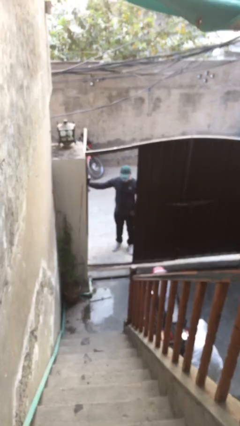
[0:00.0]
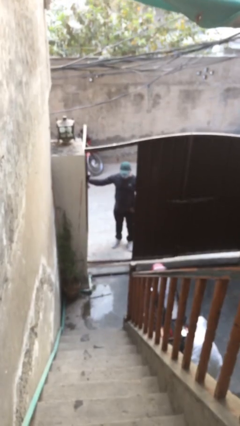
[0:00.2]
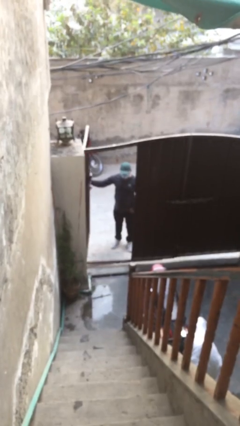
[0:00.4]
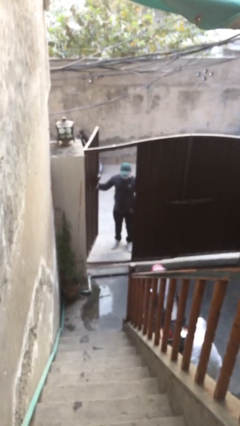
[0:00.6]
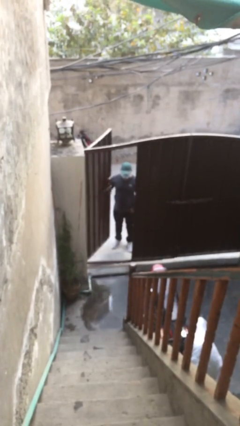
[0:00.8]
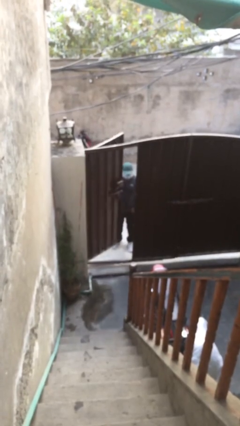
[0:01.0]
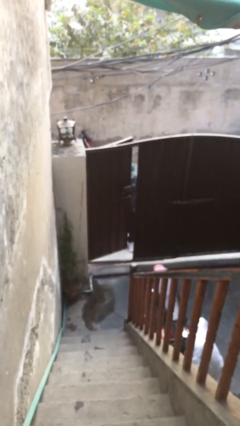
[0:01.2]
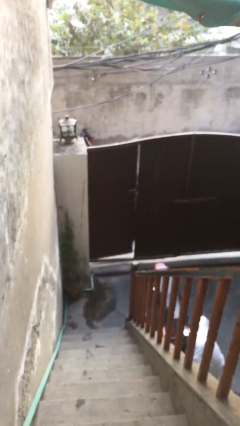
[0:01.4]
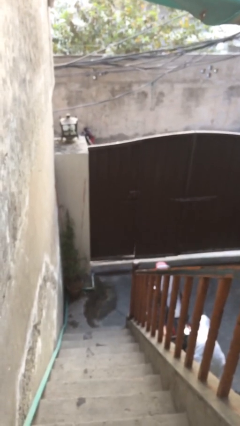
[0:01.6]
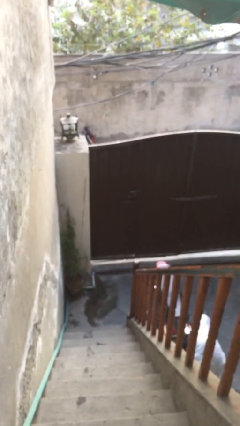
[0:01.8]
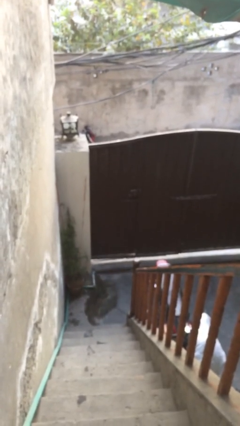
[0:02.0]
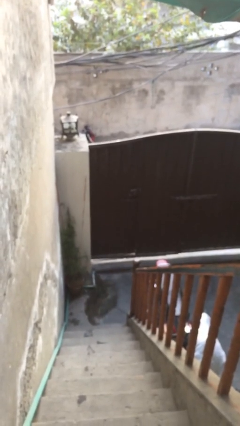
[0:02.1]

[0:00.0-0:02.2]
person closes facility door

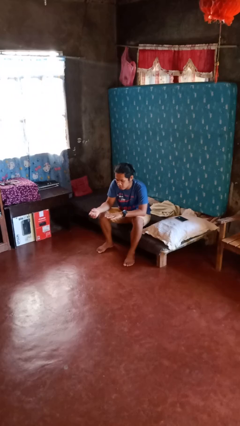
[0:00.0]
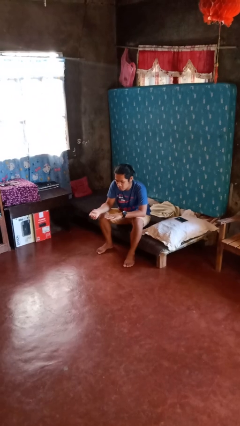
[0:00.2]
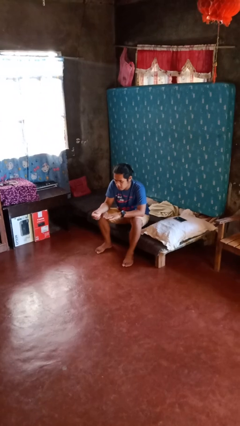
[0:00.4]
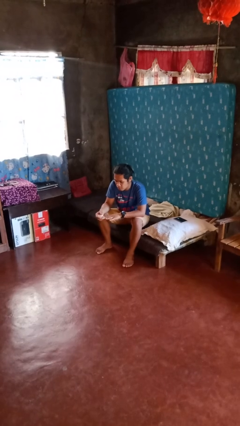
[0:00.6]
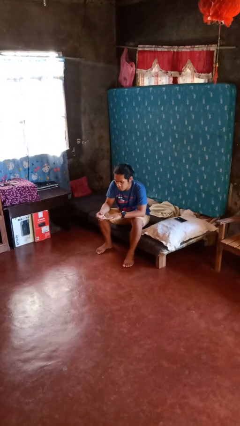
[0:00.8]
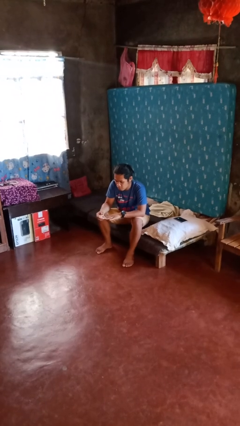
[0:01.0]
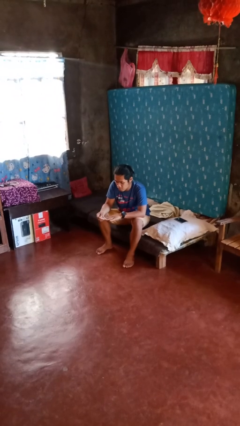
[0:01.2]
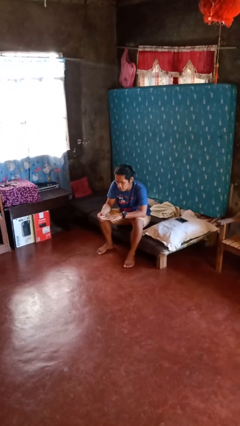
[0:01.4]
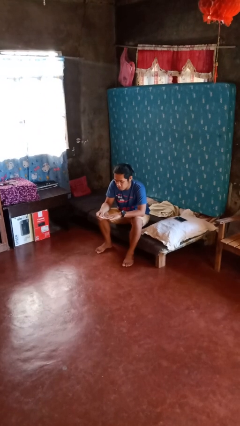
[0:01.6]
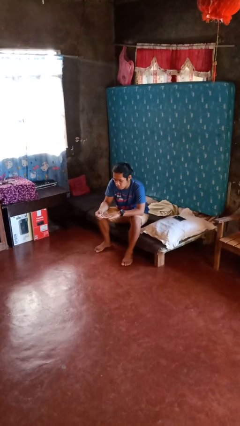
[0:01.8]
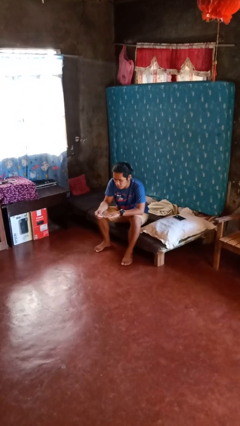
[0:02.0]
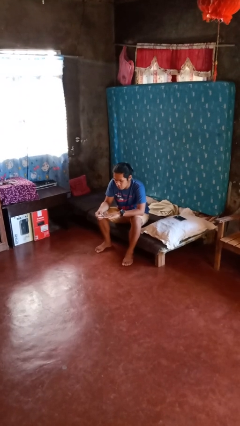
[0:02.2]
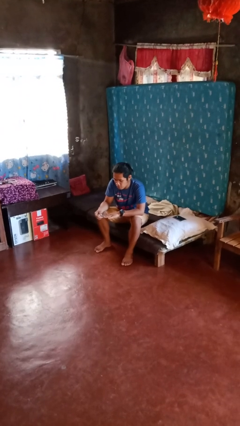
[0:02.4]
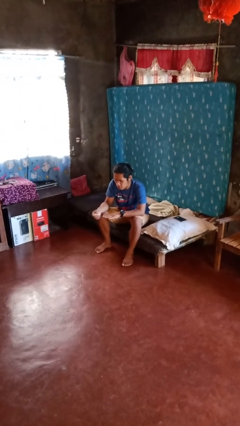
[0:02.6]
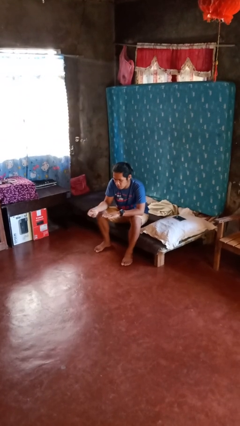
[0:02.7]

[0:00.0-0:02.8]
person clips fingernails

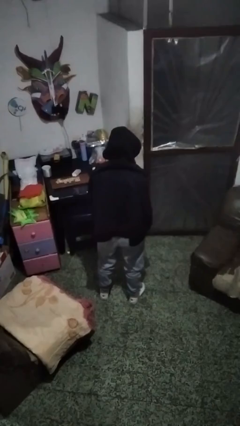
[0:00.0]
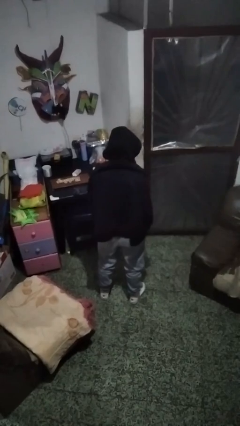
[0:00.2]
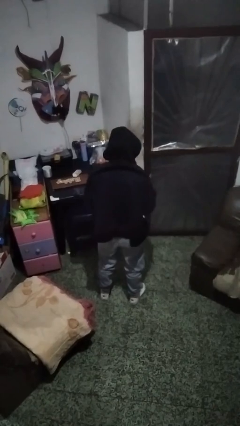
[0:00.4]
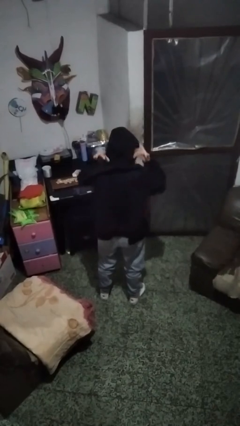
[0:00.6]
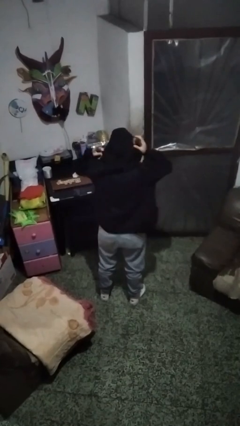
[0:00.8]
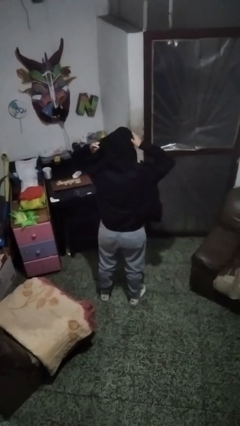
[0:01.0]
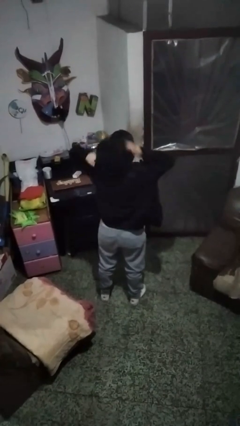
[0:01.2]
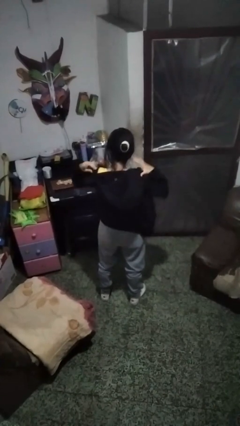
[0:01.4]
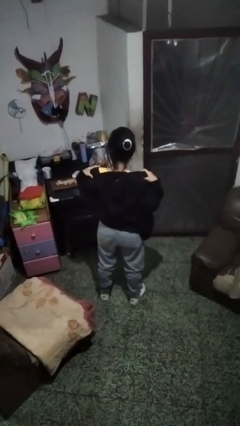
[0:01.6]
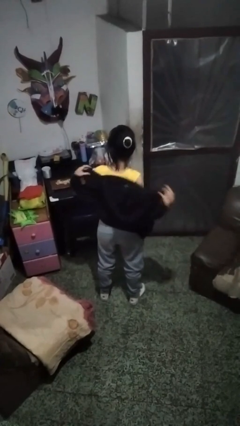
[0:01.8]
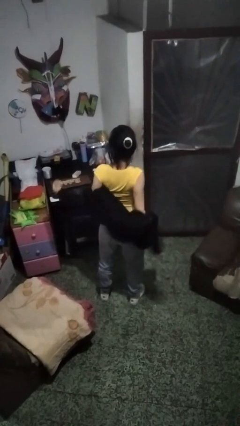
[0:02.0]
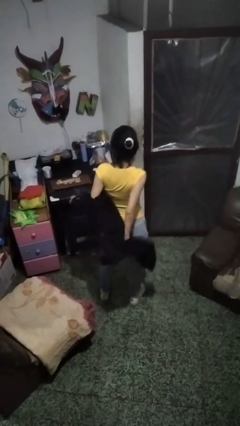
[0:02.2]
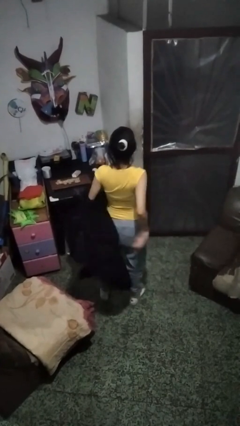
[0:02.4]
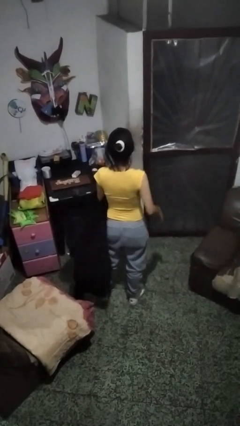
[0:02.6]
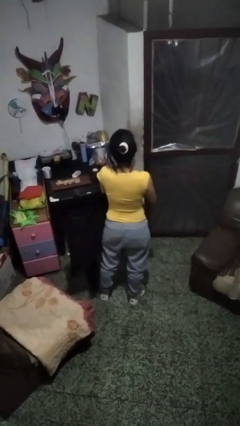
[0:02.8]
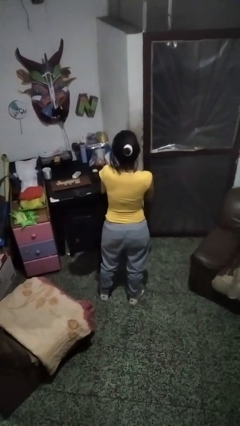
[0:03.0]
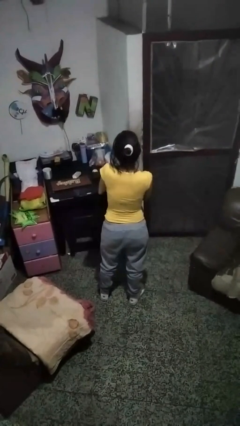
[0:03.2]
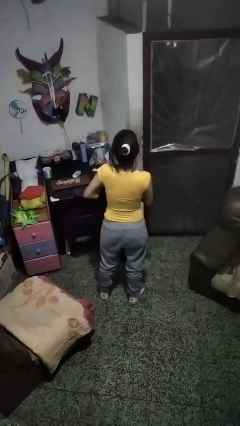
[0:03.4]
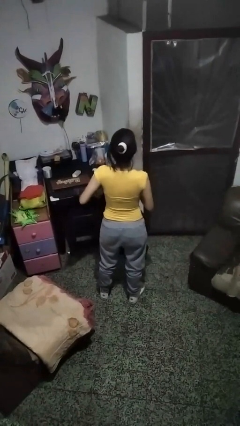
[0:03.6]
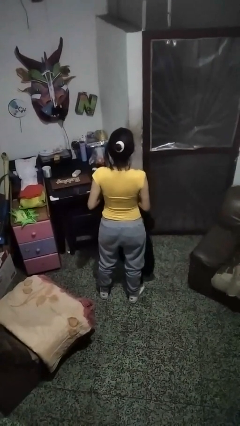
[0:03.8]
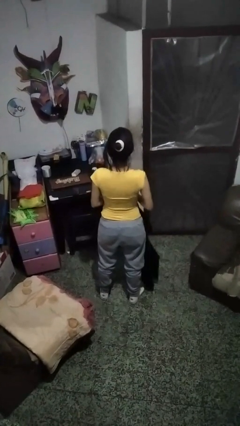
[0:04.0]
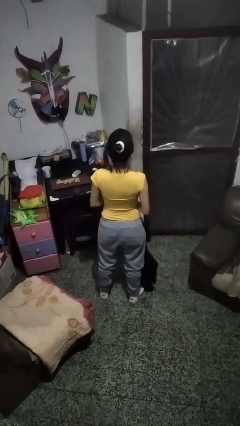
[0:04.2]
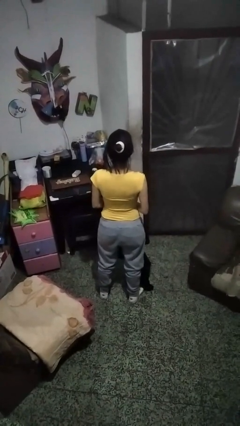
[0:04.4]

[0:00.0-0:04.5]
person takes off hoodie

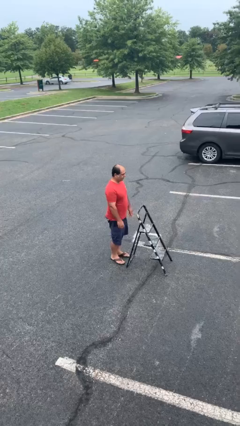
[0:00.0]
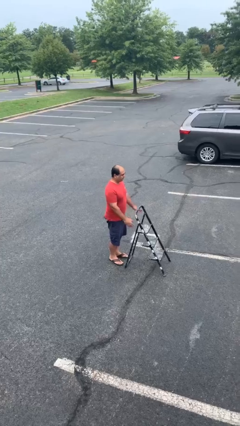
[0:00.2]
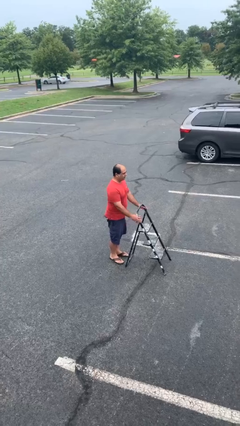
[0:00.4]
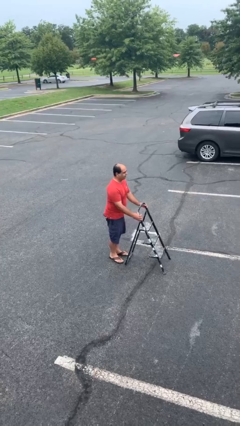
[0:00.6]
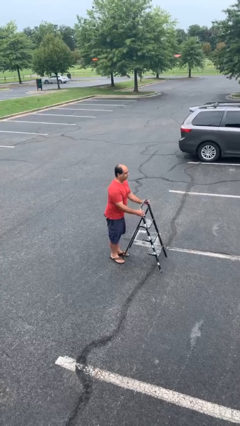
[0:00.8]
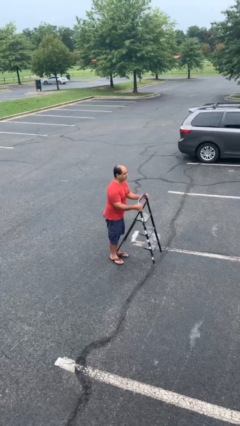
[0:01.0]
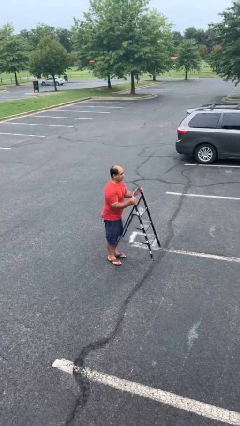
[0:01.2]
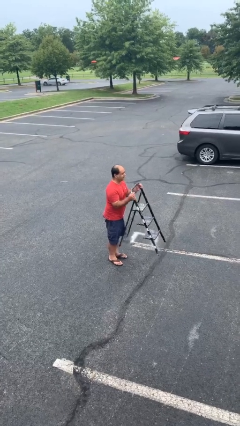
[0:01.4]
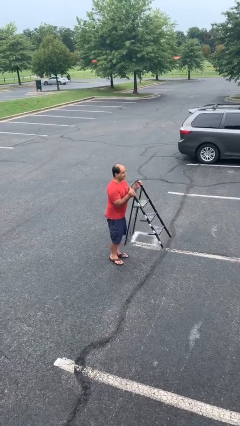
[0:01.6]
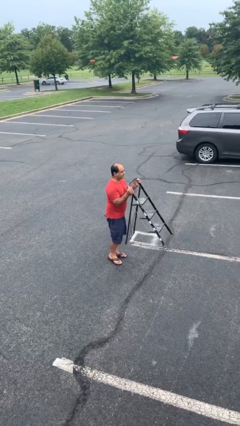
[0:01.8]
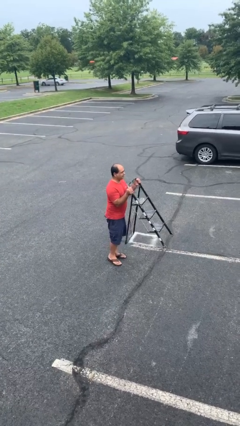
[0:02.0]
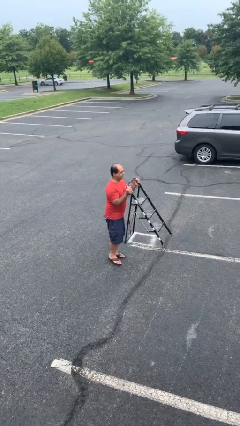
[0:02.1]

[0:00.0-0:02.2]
person picks up object from floor

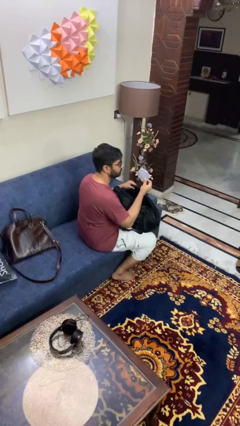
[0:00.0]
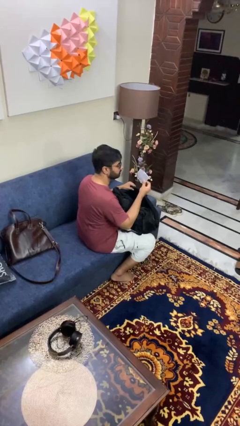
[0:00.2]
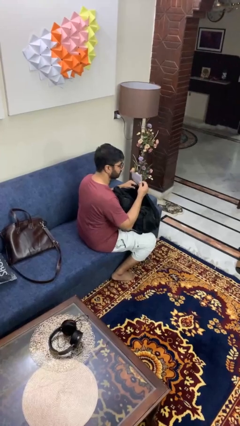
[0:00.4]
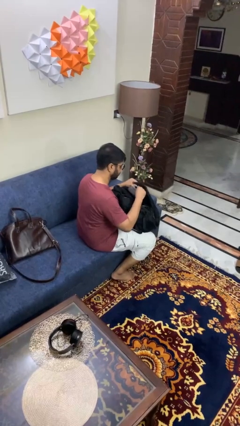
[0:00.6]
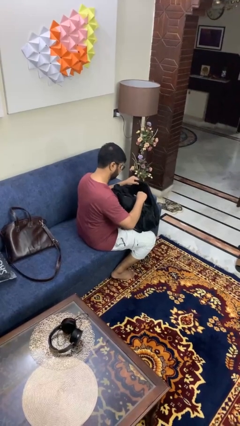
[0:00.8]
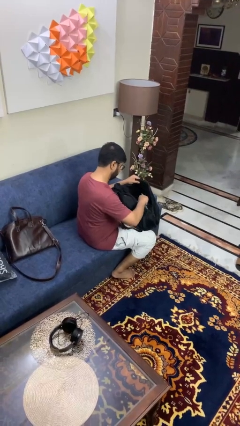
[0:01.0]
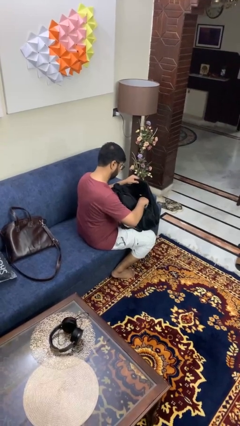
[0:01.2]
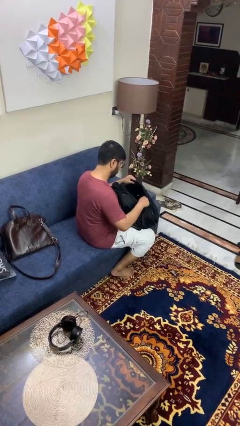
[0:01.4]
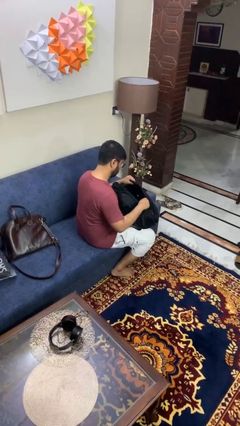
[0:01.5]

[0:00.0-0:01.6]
person puts object into backpack

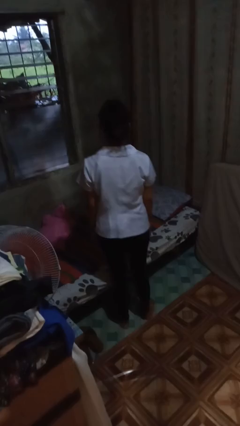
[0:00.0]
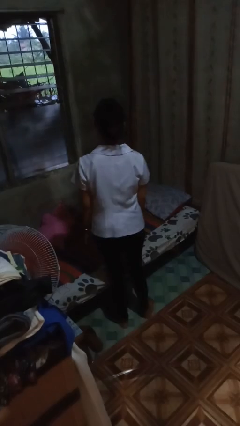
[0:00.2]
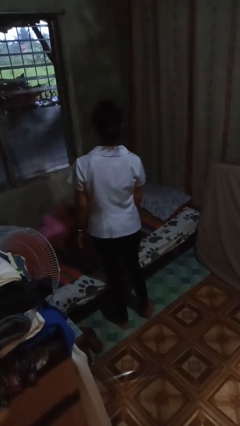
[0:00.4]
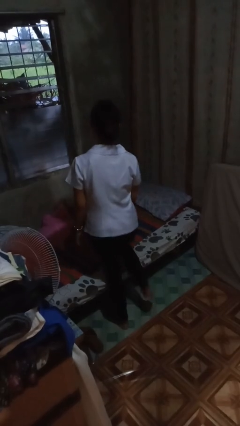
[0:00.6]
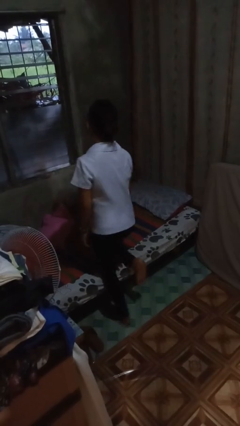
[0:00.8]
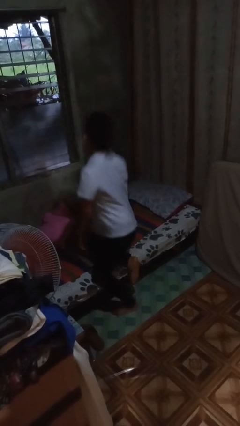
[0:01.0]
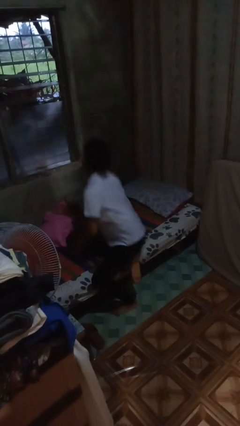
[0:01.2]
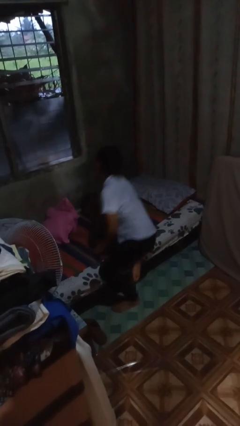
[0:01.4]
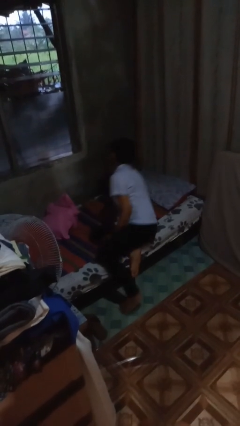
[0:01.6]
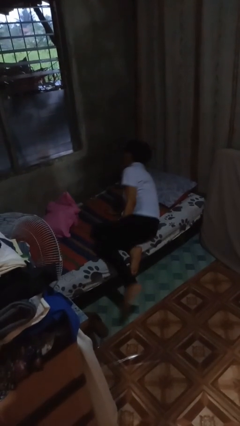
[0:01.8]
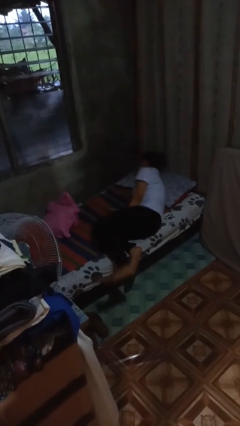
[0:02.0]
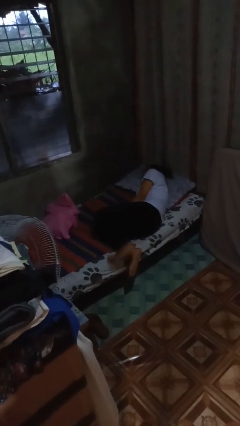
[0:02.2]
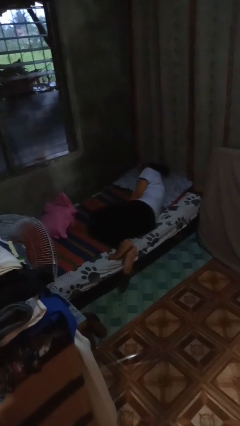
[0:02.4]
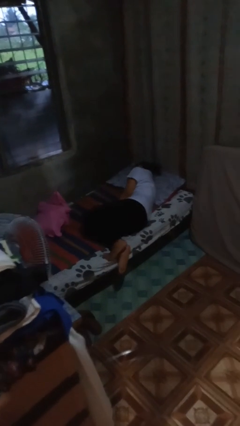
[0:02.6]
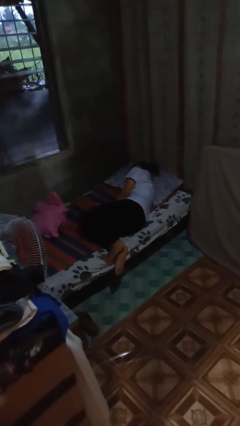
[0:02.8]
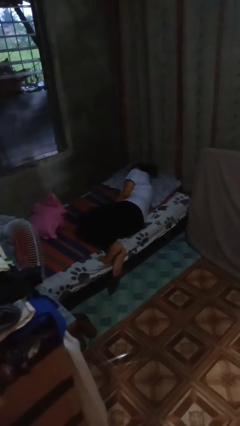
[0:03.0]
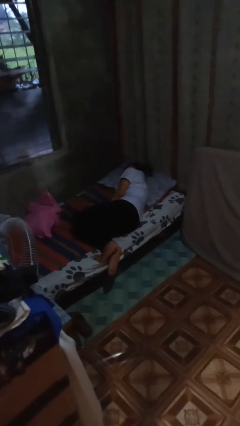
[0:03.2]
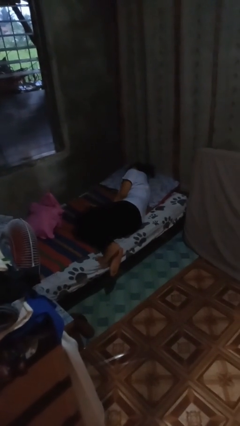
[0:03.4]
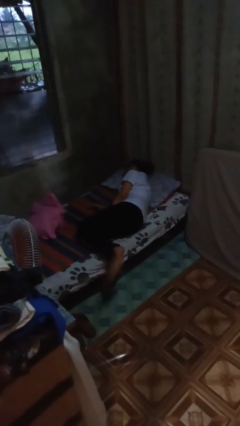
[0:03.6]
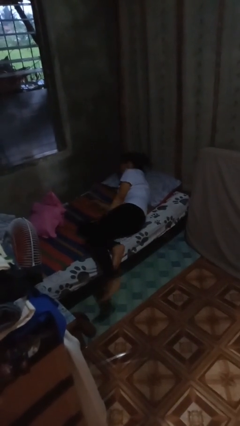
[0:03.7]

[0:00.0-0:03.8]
person lies down on bed

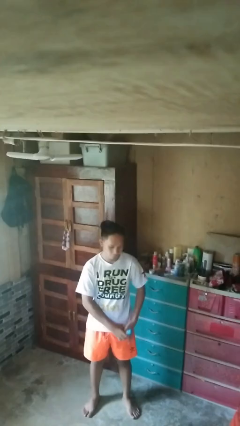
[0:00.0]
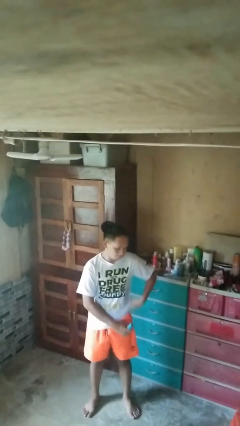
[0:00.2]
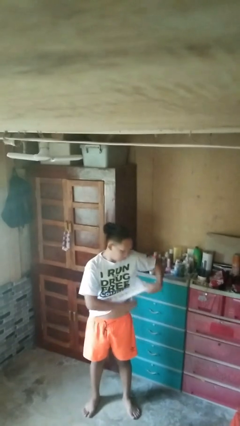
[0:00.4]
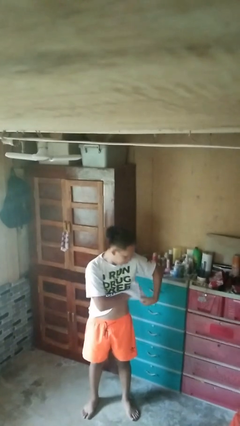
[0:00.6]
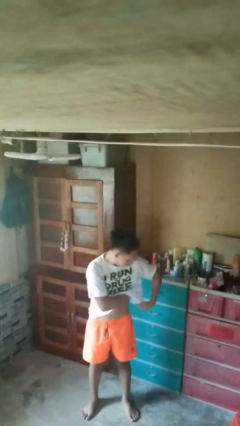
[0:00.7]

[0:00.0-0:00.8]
person applies deodorant
